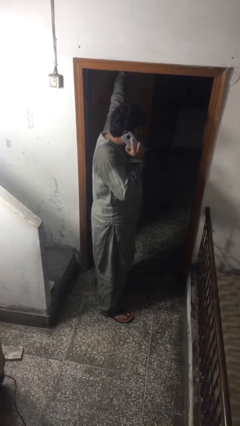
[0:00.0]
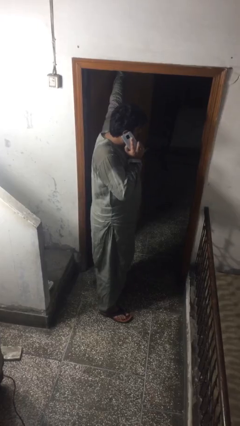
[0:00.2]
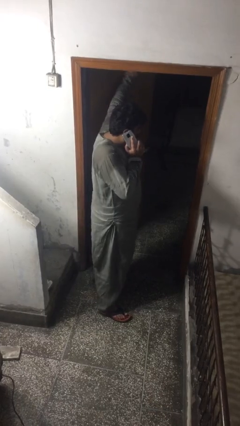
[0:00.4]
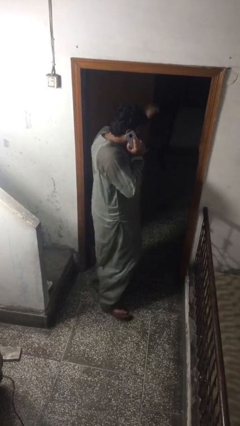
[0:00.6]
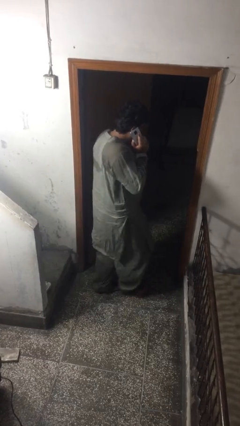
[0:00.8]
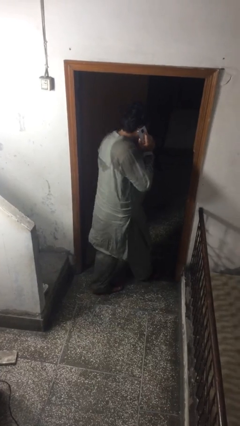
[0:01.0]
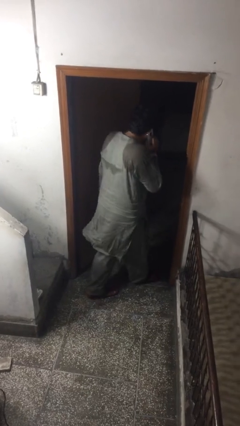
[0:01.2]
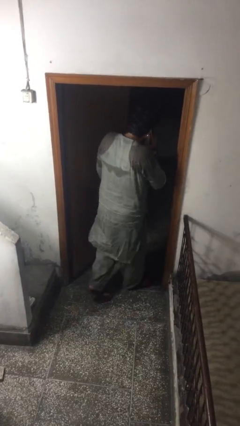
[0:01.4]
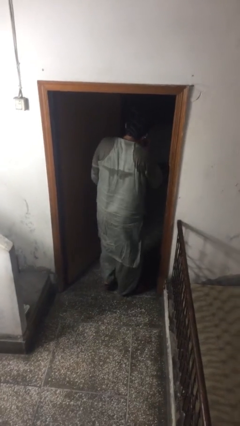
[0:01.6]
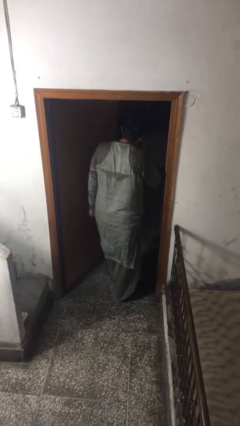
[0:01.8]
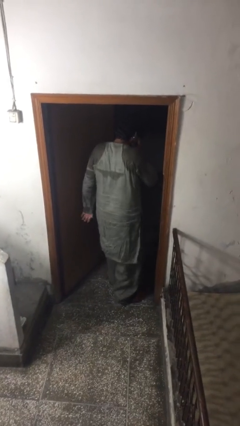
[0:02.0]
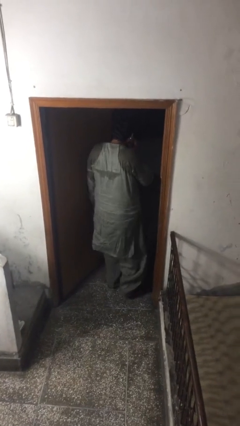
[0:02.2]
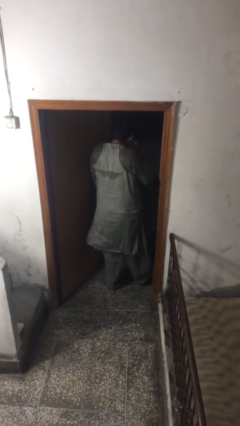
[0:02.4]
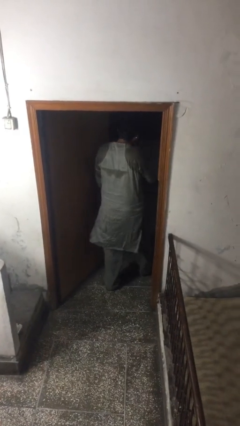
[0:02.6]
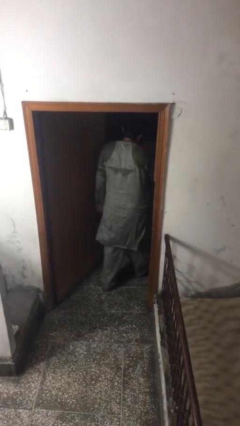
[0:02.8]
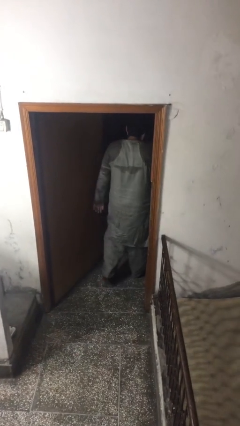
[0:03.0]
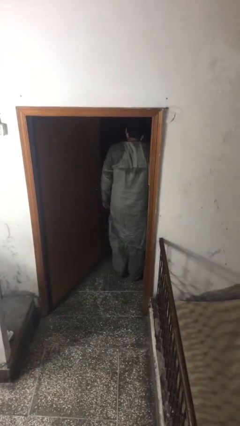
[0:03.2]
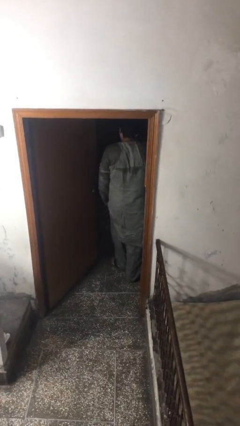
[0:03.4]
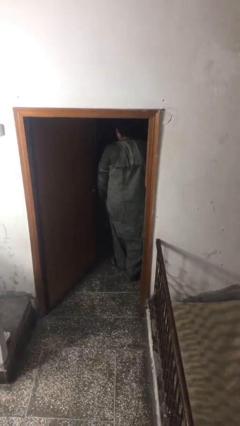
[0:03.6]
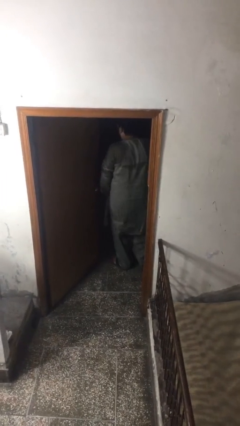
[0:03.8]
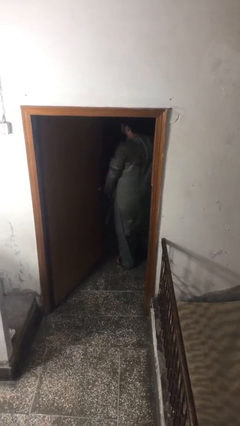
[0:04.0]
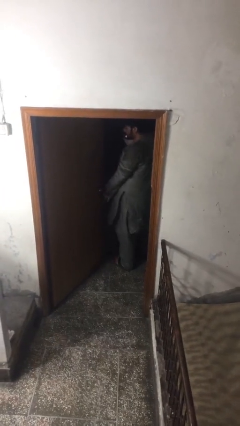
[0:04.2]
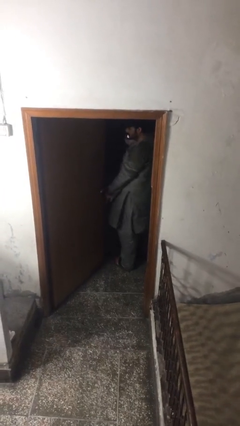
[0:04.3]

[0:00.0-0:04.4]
person exits scene through structure

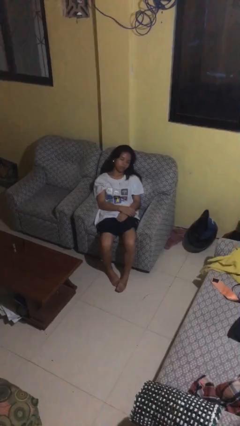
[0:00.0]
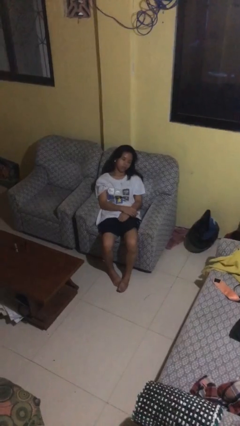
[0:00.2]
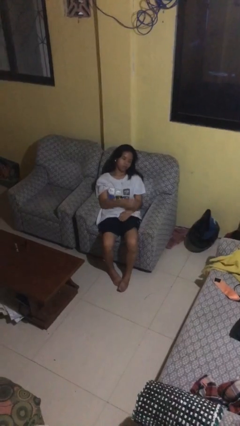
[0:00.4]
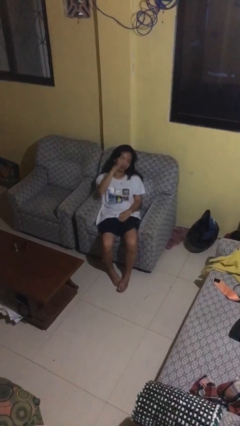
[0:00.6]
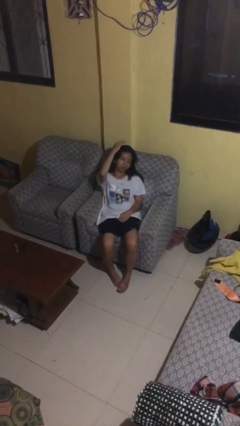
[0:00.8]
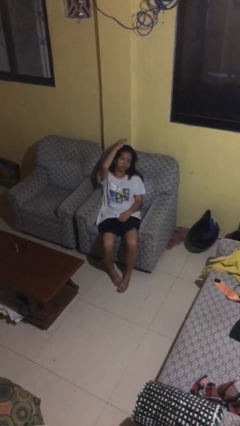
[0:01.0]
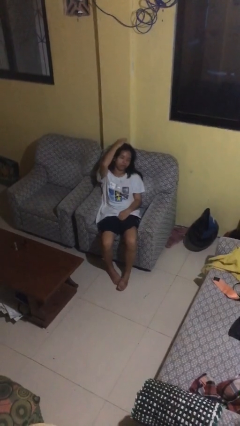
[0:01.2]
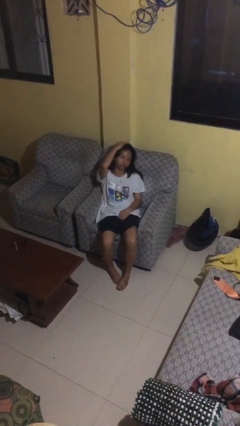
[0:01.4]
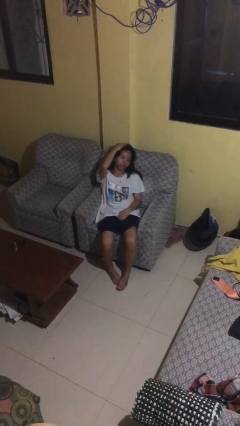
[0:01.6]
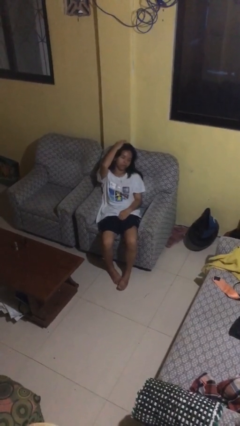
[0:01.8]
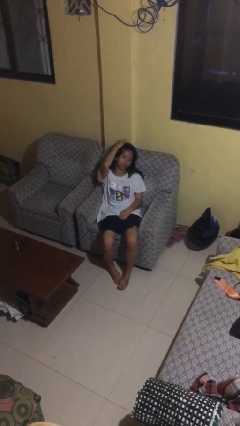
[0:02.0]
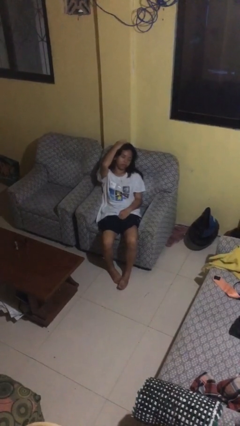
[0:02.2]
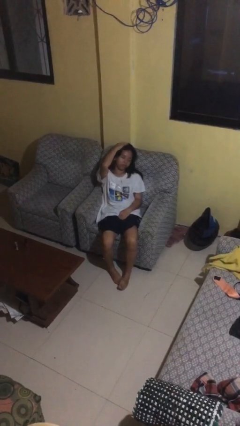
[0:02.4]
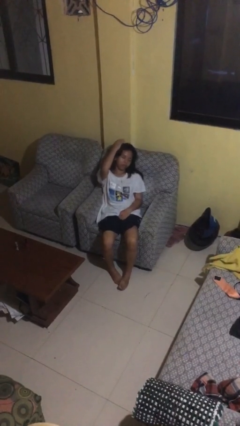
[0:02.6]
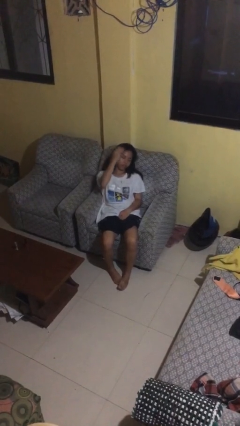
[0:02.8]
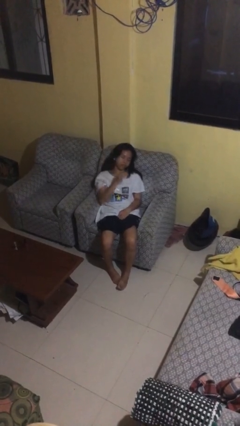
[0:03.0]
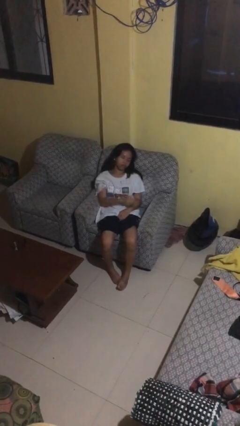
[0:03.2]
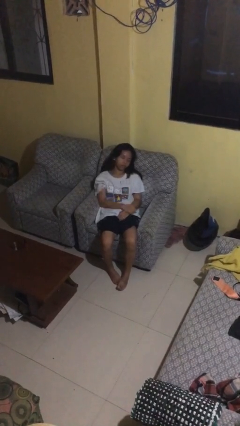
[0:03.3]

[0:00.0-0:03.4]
person pats head

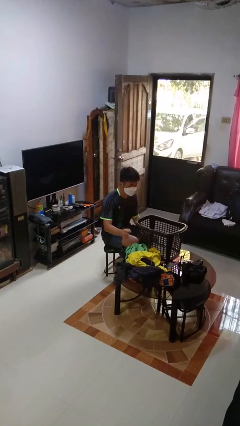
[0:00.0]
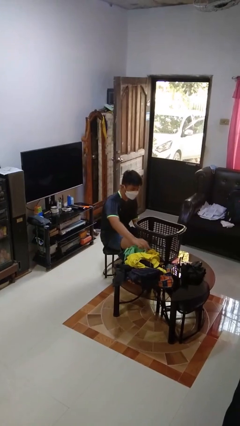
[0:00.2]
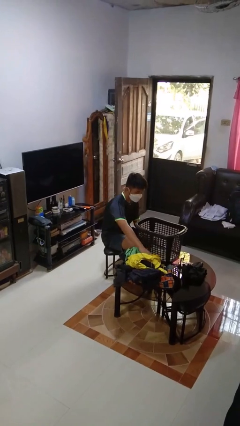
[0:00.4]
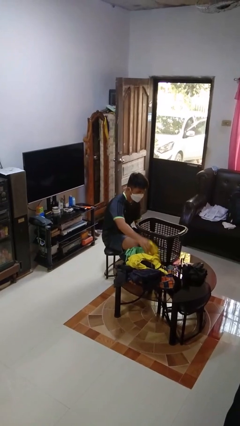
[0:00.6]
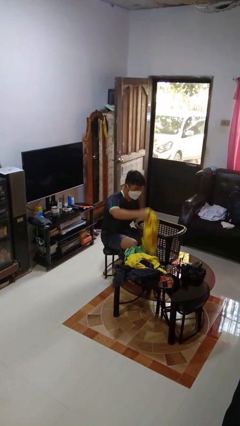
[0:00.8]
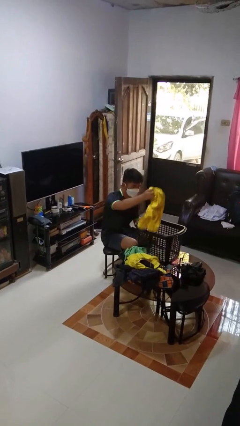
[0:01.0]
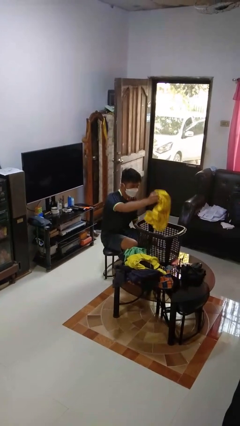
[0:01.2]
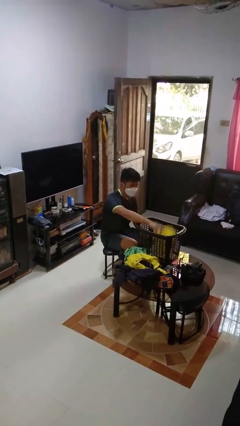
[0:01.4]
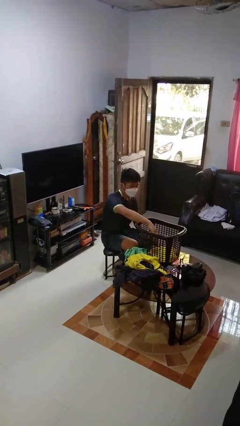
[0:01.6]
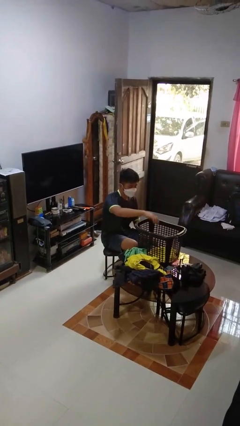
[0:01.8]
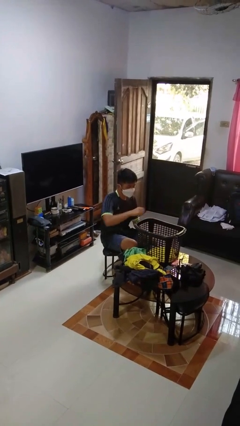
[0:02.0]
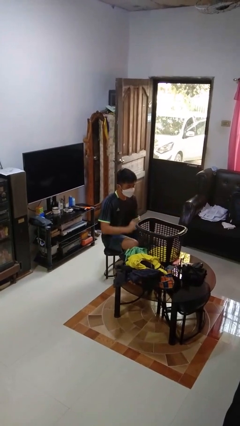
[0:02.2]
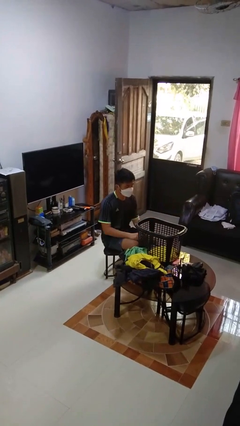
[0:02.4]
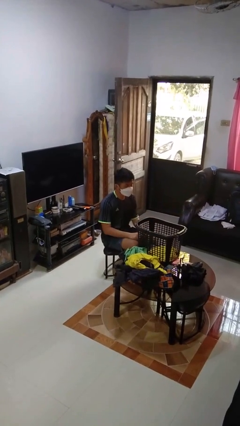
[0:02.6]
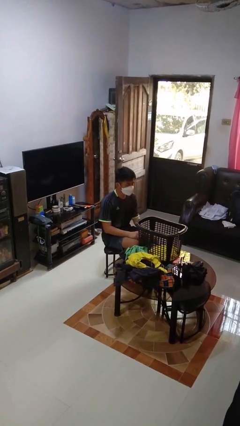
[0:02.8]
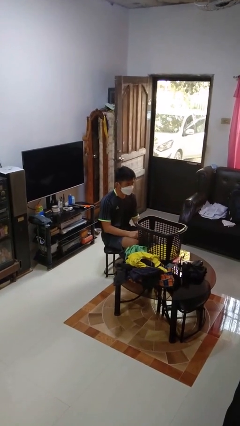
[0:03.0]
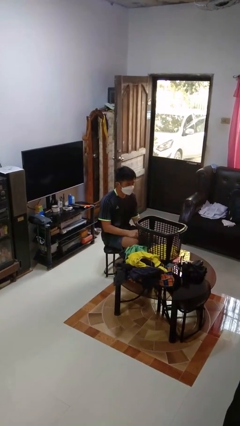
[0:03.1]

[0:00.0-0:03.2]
person puts object into basket

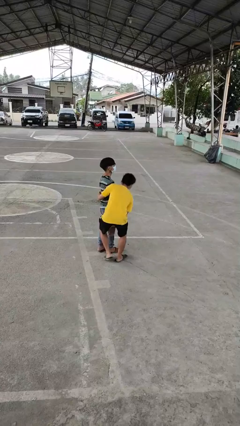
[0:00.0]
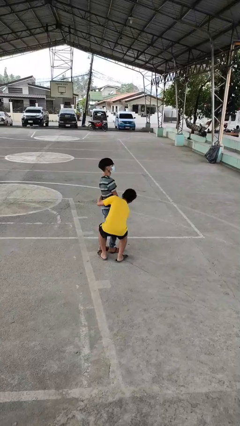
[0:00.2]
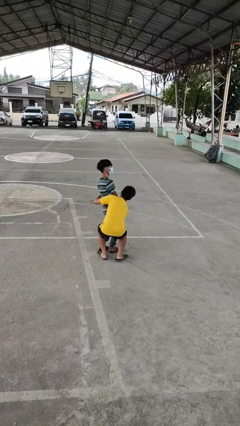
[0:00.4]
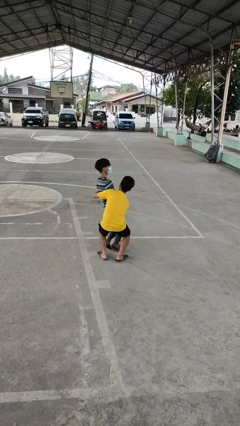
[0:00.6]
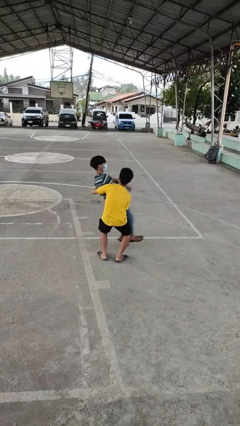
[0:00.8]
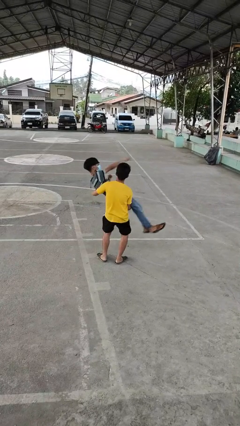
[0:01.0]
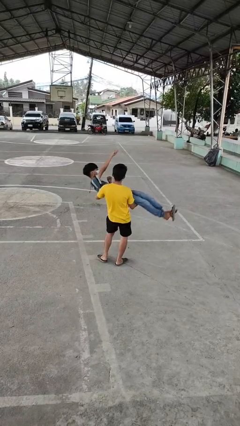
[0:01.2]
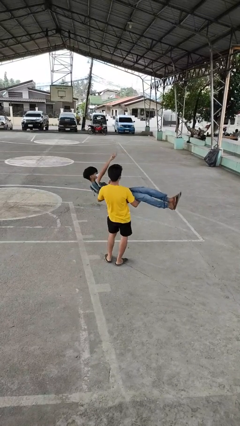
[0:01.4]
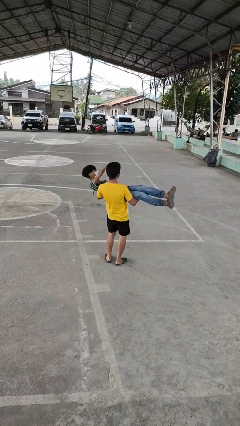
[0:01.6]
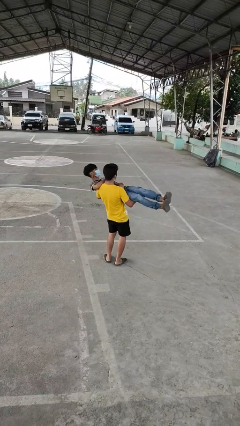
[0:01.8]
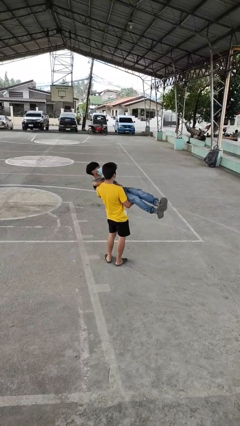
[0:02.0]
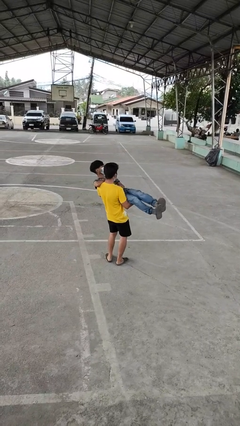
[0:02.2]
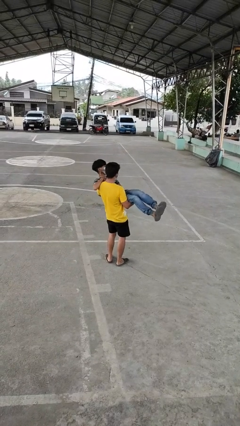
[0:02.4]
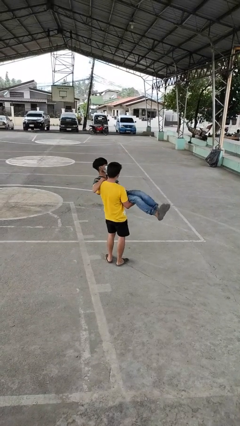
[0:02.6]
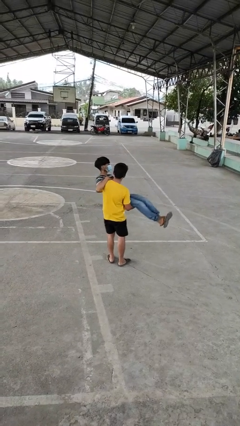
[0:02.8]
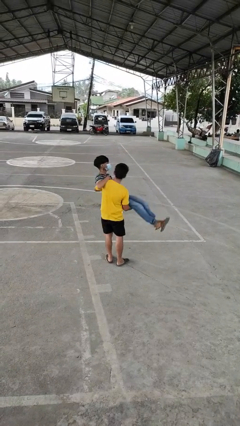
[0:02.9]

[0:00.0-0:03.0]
person picks up person

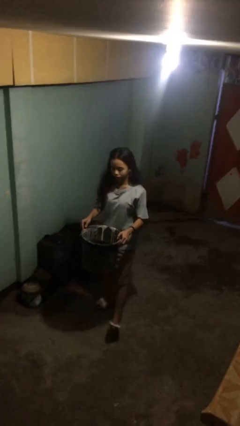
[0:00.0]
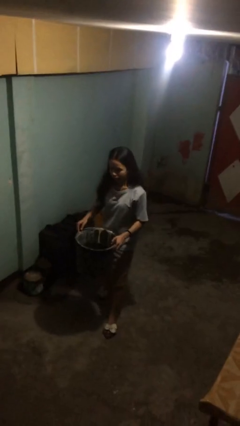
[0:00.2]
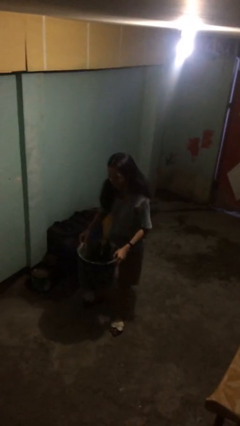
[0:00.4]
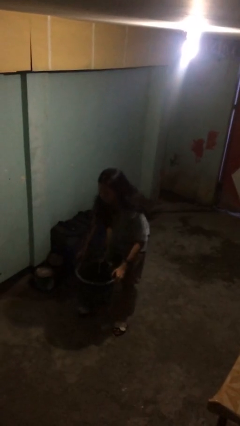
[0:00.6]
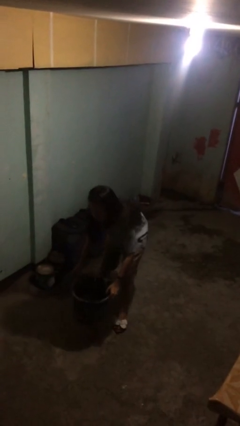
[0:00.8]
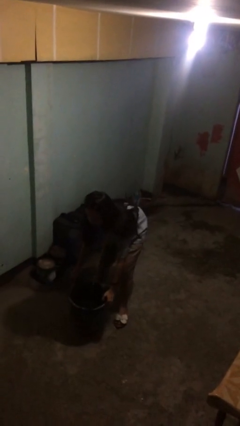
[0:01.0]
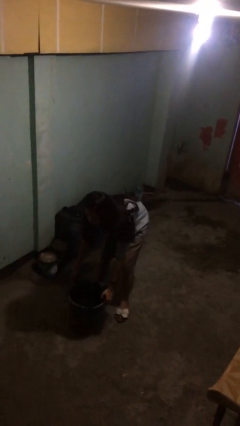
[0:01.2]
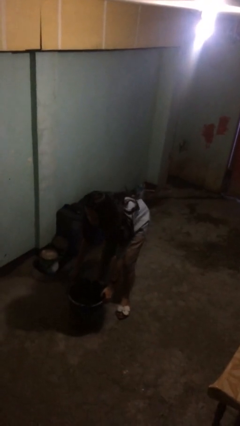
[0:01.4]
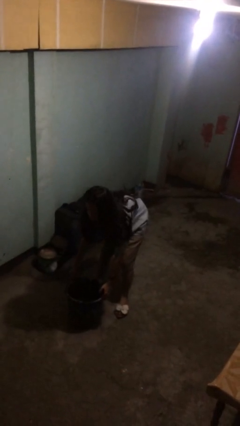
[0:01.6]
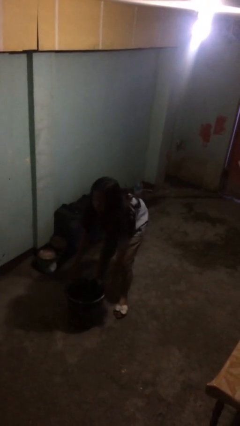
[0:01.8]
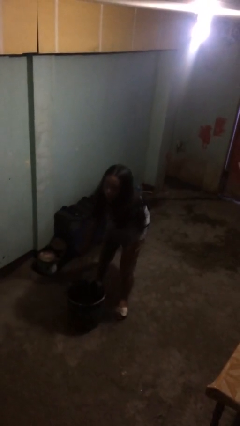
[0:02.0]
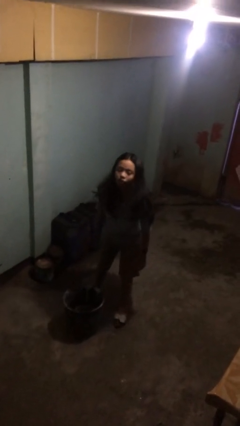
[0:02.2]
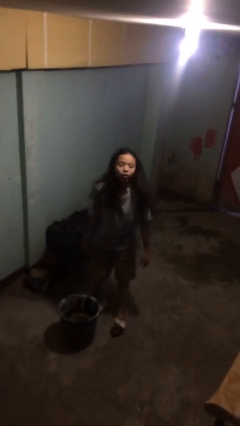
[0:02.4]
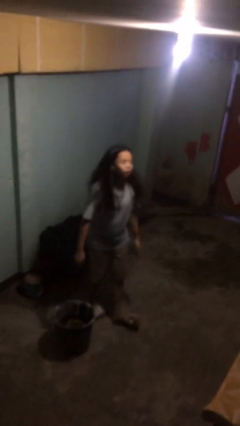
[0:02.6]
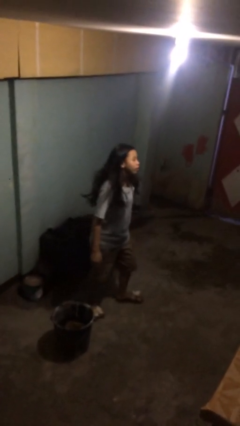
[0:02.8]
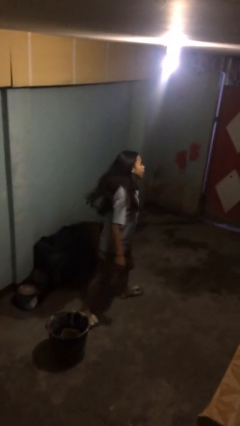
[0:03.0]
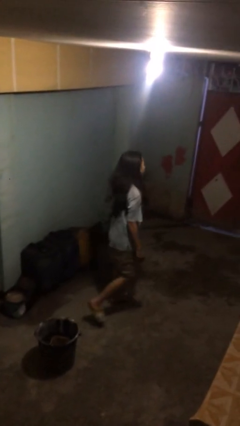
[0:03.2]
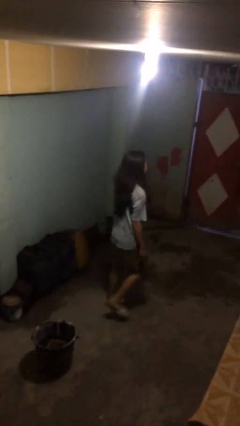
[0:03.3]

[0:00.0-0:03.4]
person puts down object on floor
